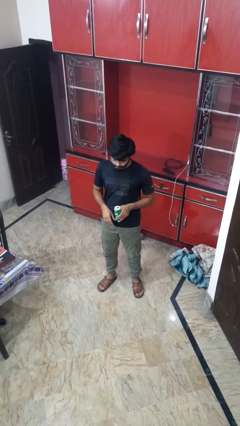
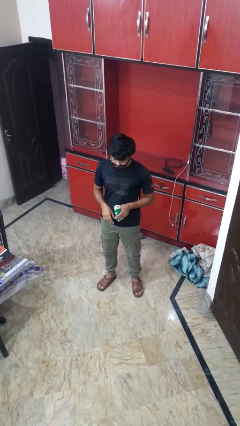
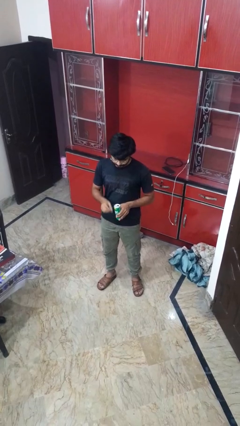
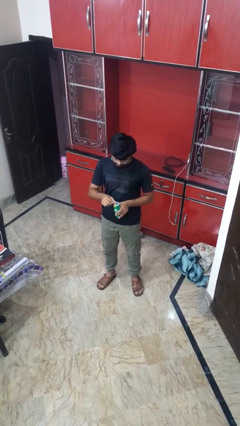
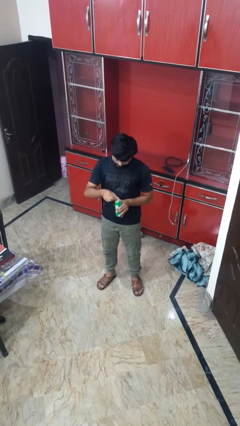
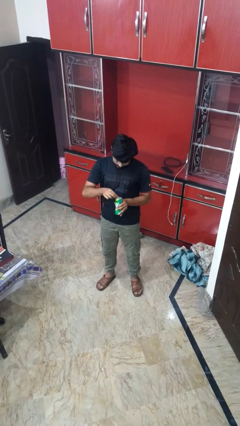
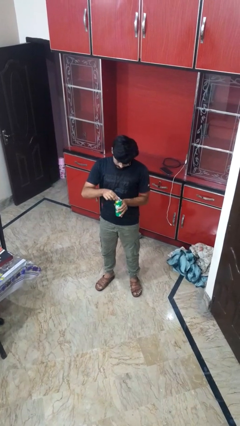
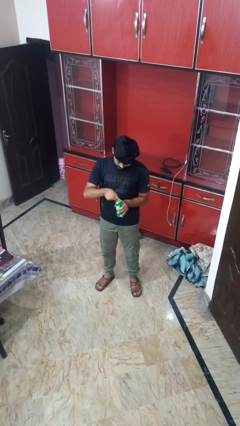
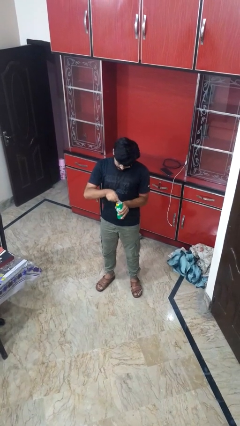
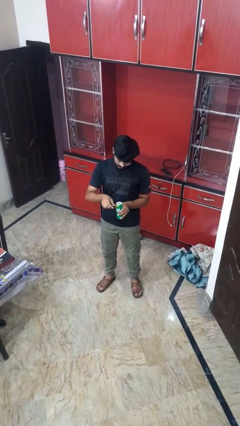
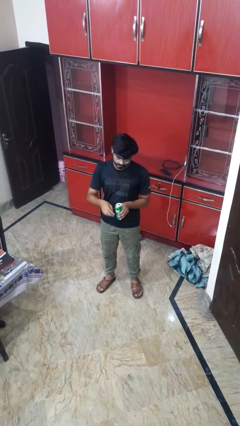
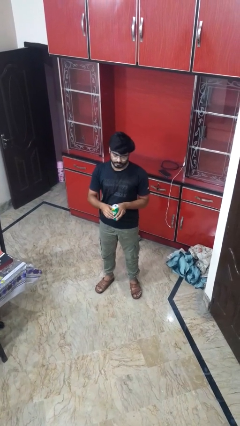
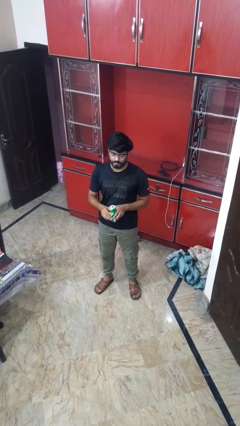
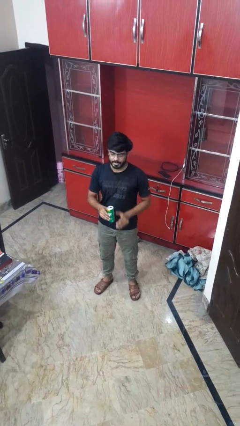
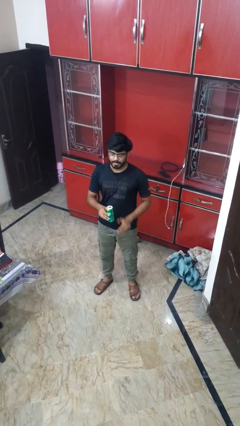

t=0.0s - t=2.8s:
person opens beverage can

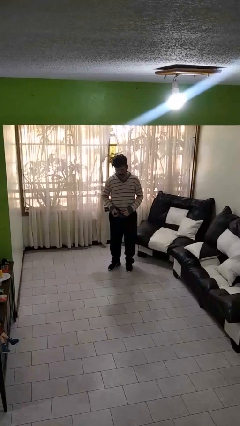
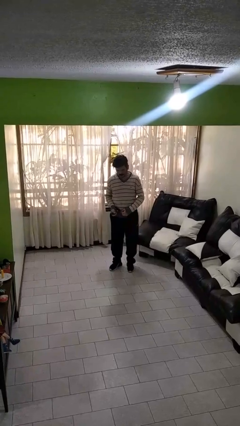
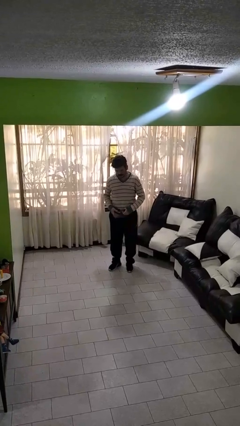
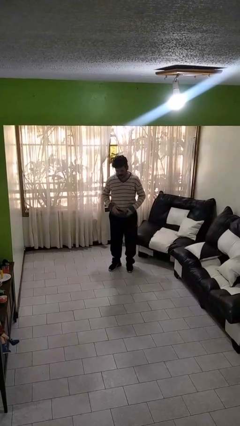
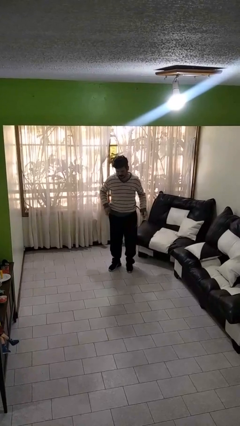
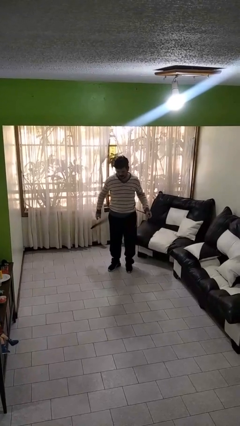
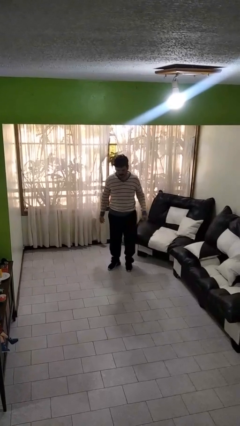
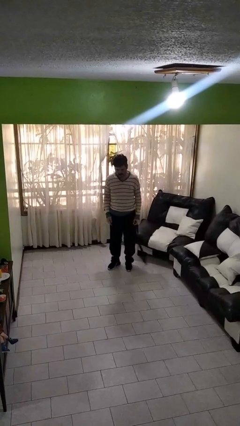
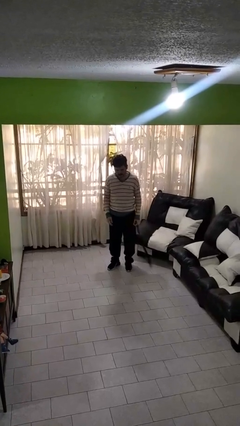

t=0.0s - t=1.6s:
person takes off belt

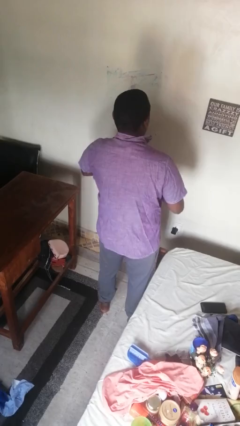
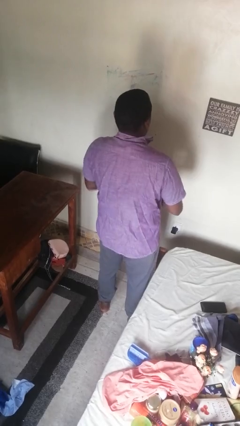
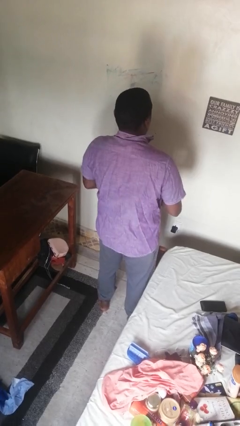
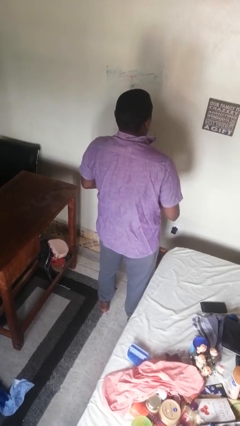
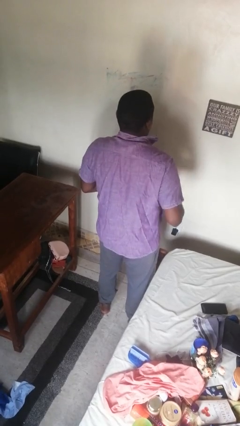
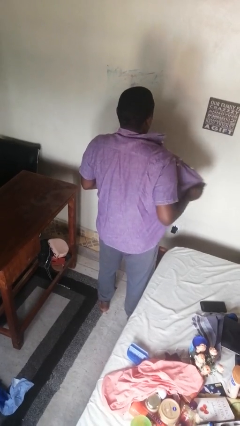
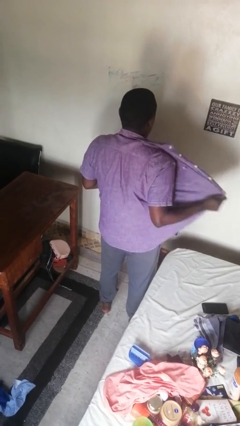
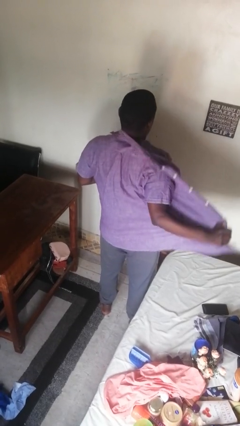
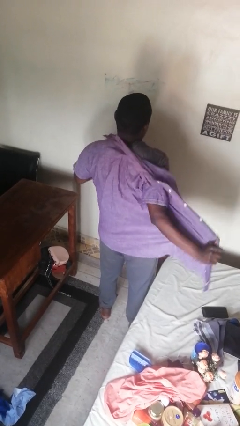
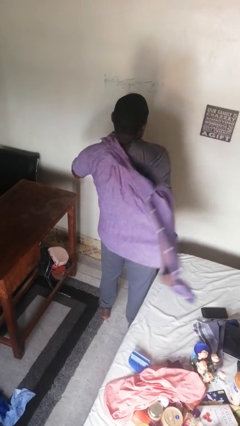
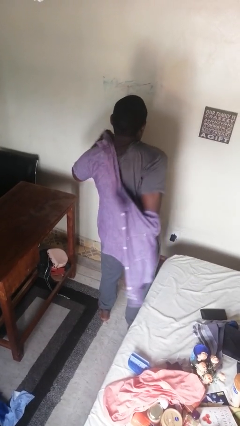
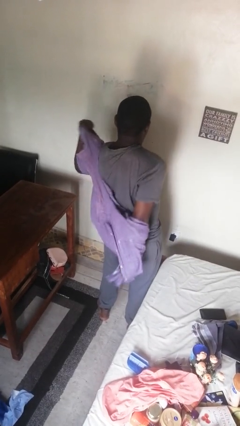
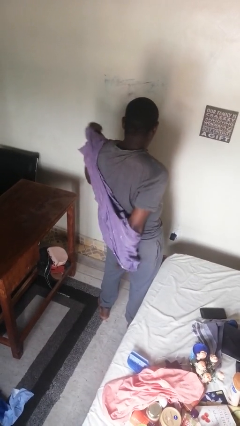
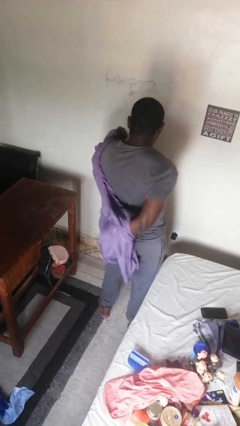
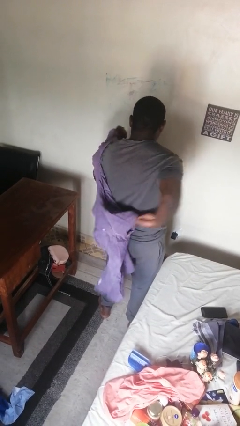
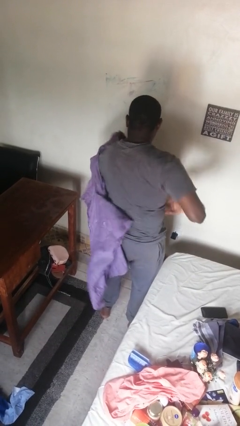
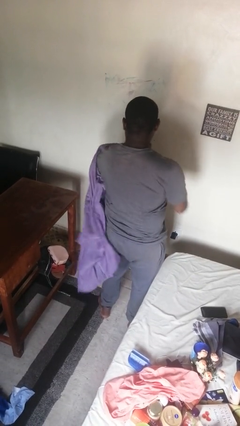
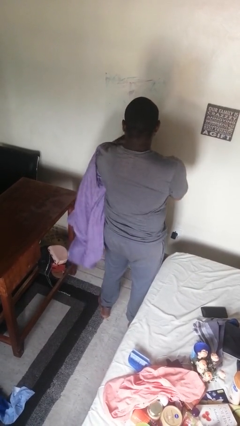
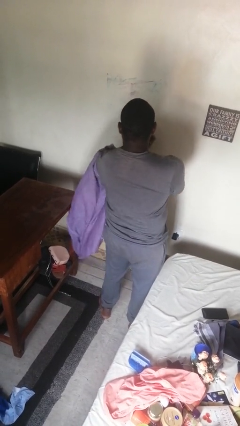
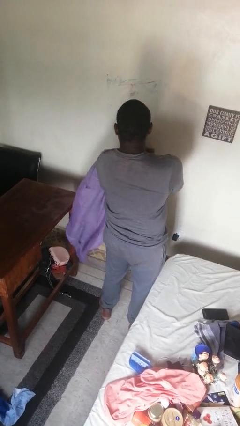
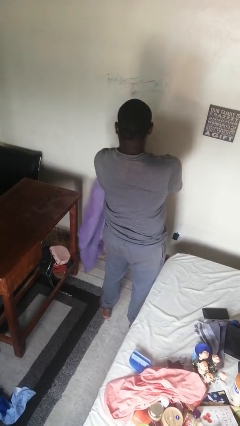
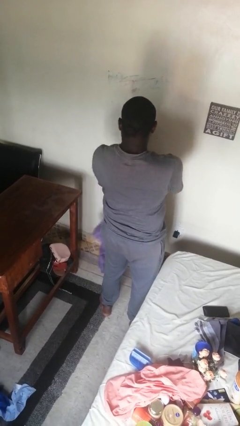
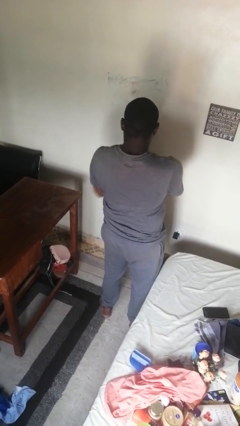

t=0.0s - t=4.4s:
person takes off shirt

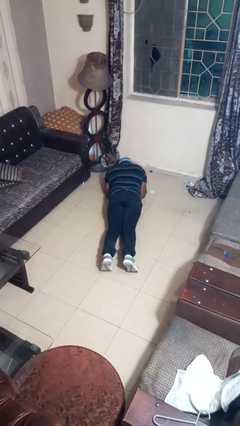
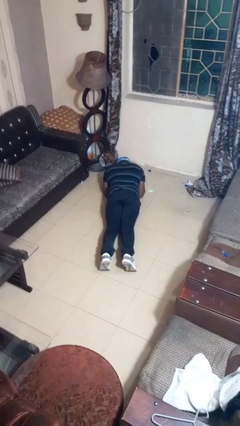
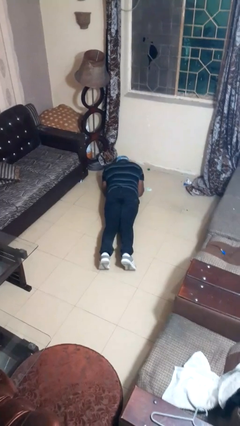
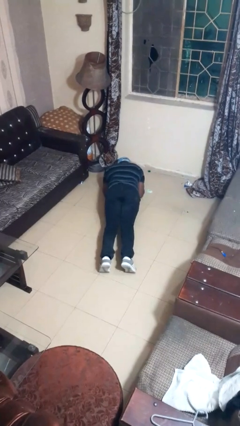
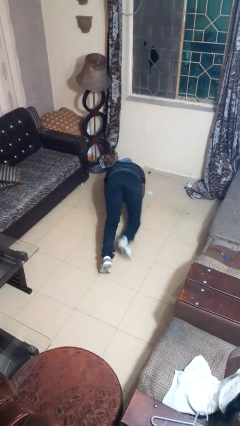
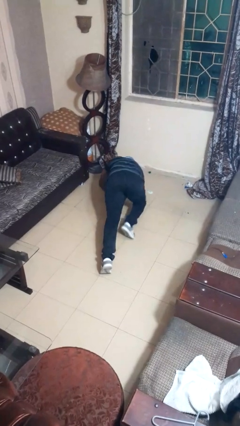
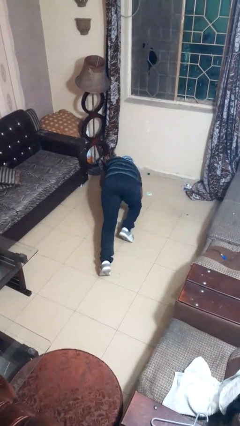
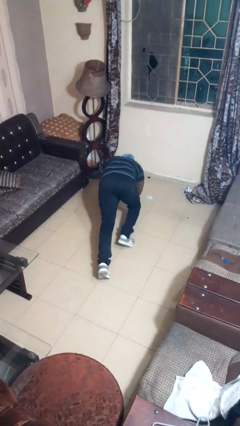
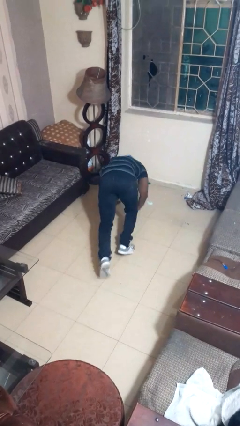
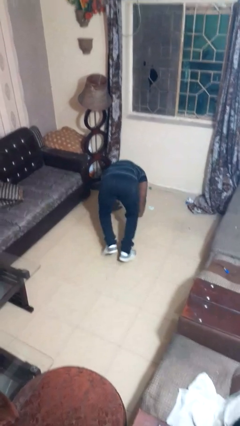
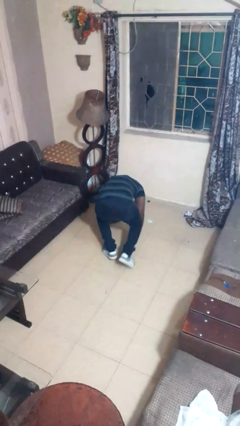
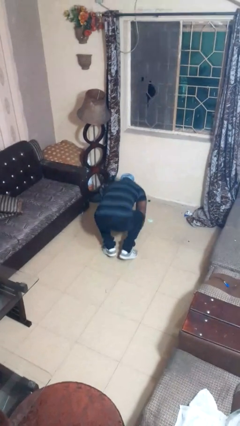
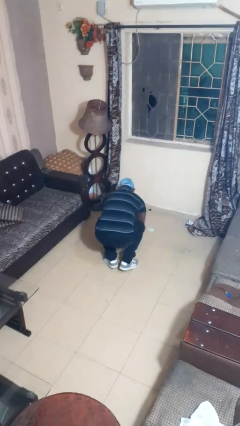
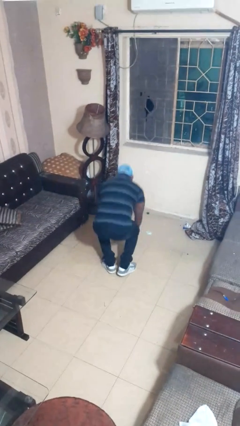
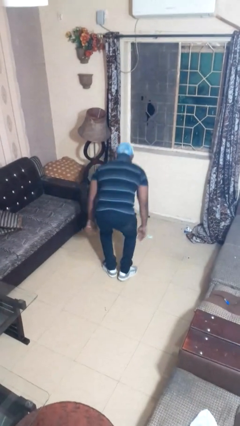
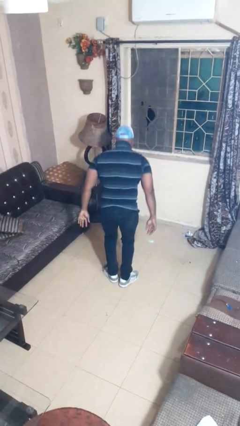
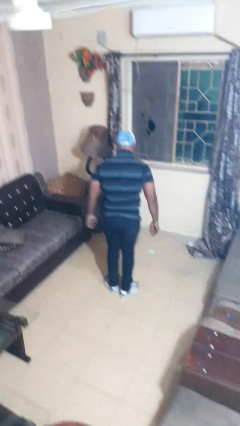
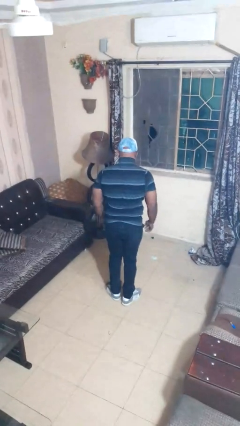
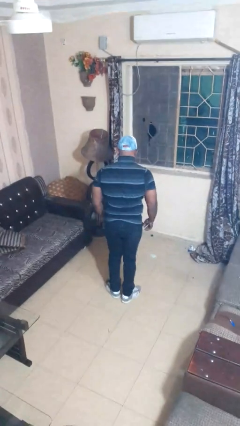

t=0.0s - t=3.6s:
person stands up from floor

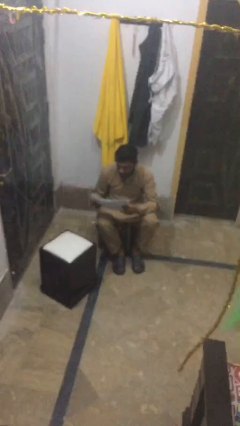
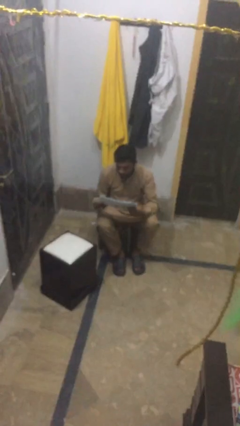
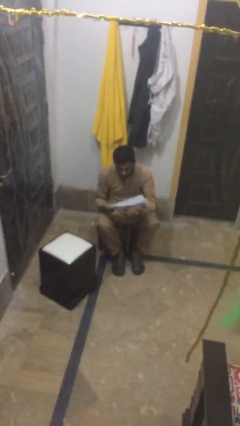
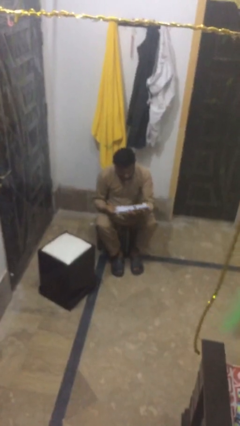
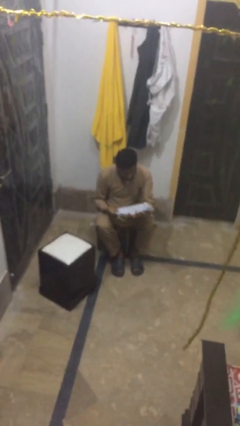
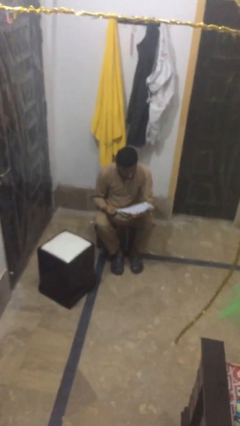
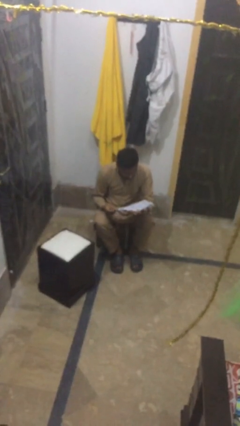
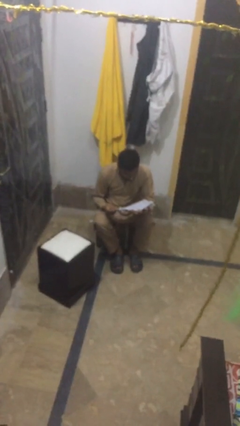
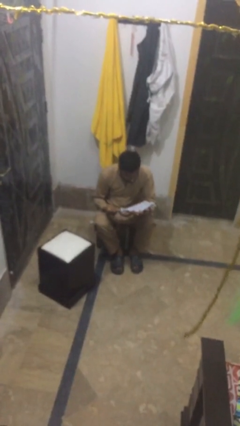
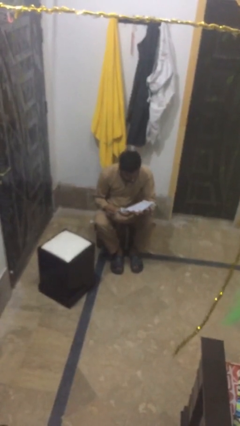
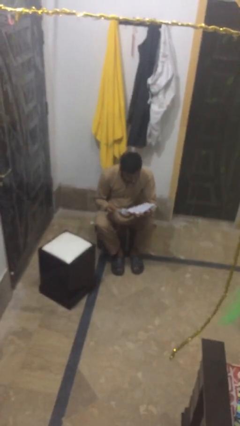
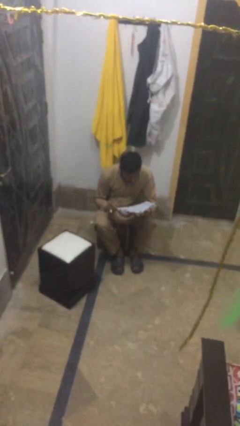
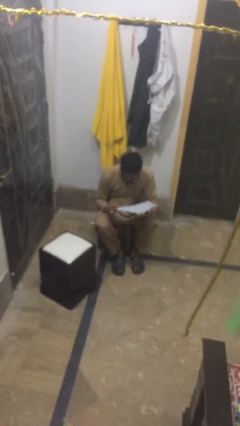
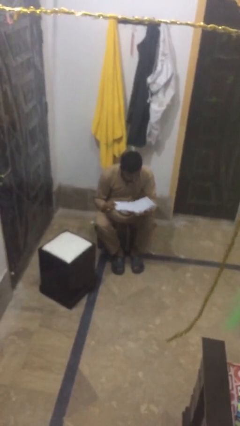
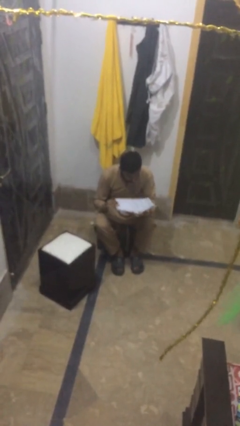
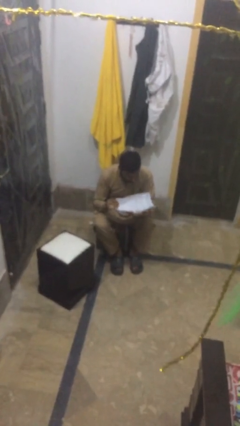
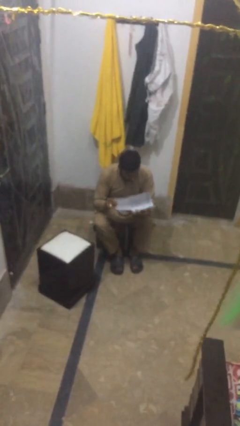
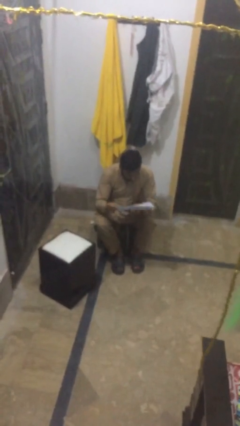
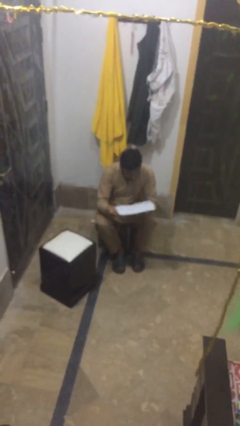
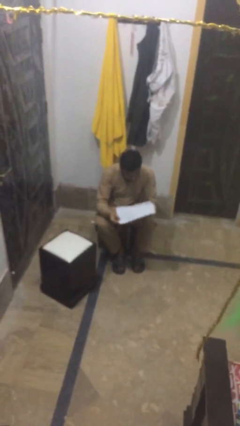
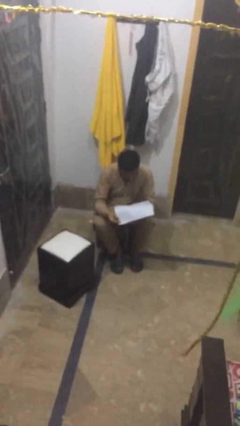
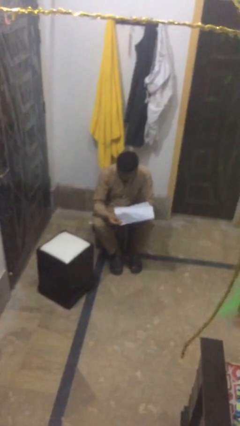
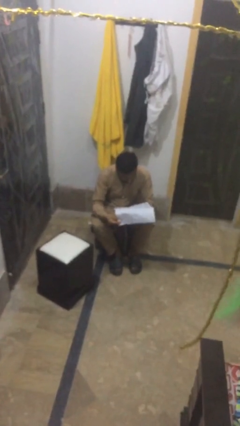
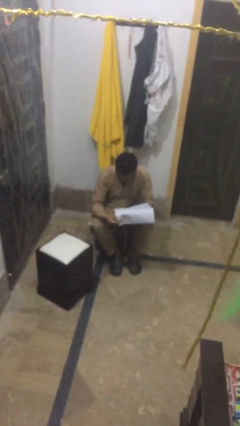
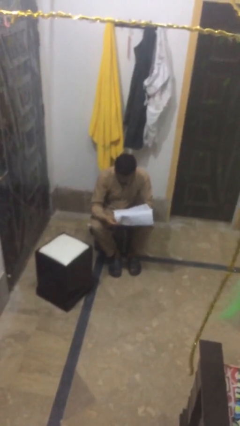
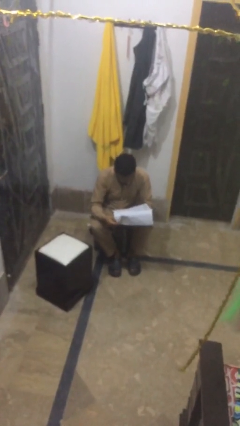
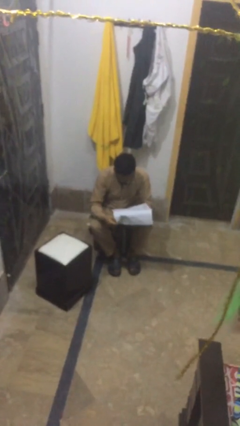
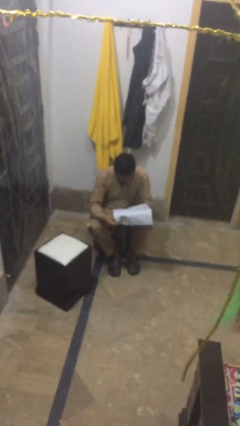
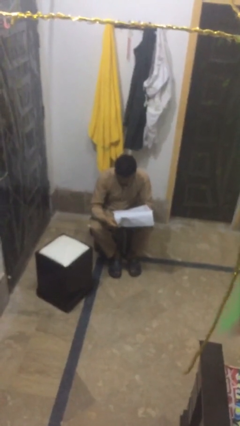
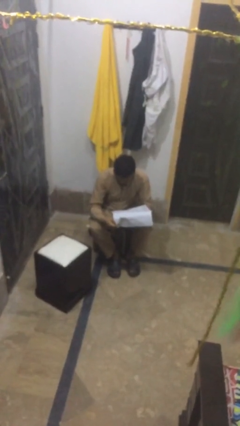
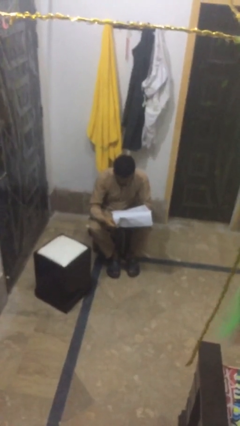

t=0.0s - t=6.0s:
person reads document
